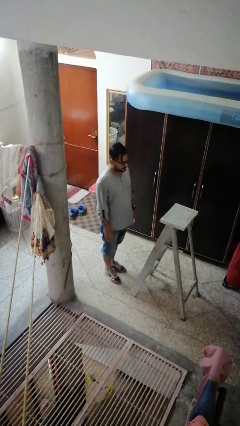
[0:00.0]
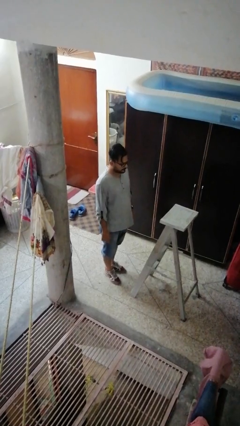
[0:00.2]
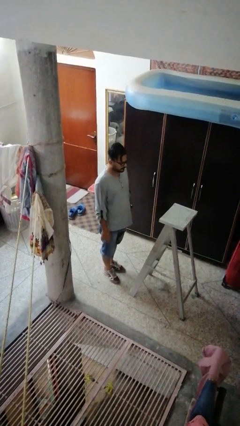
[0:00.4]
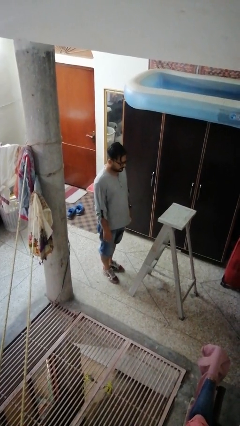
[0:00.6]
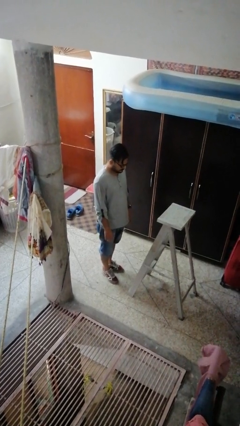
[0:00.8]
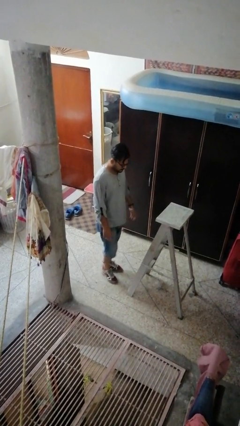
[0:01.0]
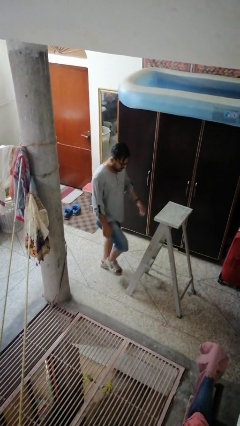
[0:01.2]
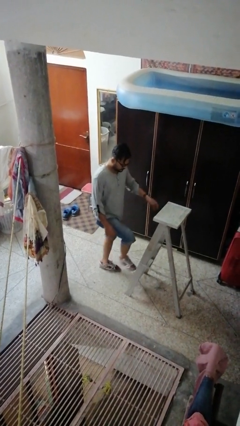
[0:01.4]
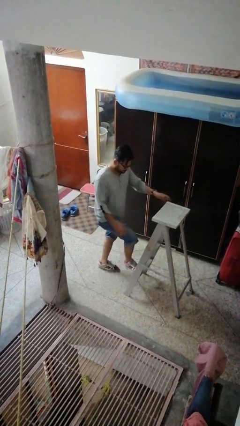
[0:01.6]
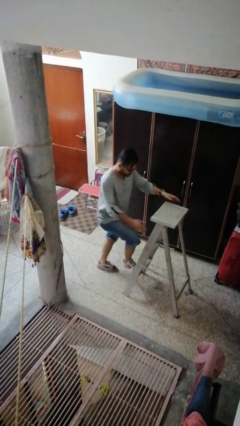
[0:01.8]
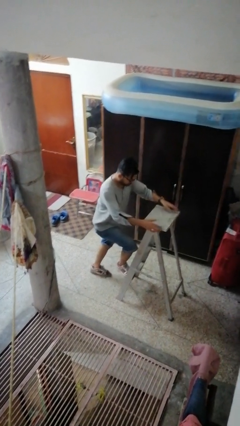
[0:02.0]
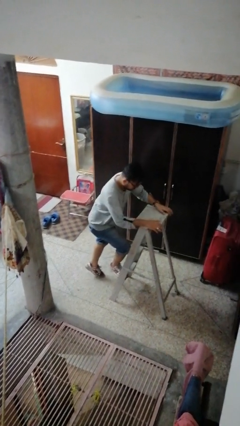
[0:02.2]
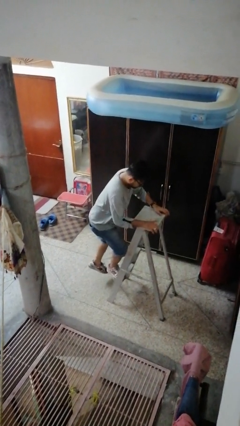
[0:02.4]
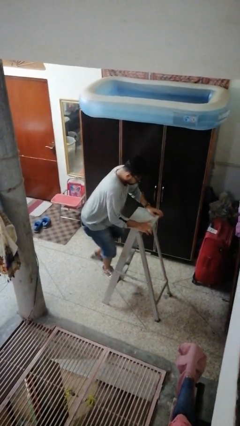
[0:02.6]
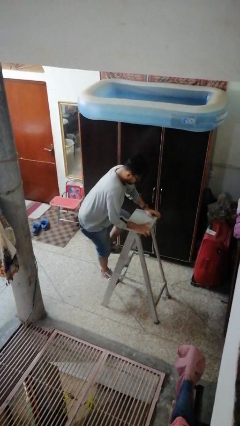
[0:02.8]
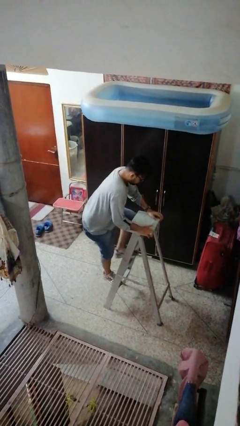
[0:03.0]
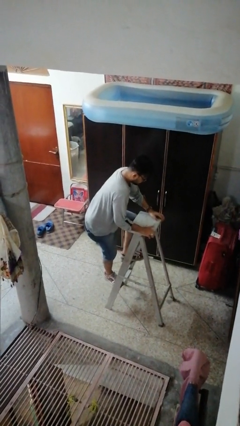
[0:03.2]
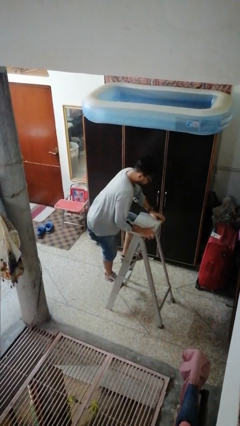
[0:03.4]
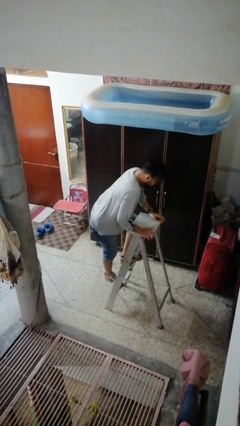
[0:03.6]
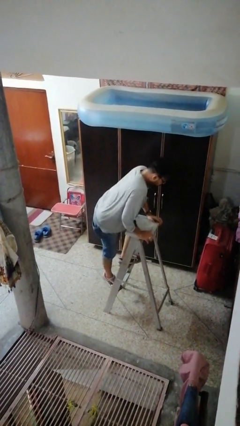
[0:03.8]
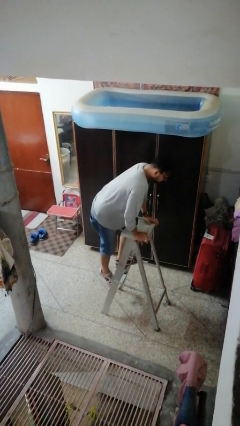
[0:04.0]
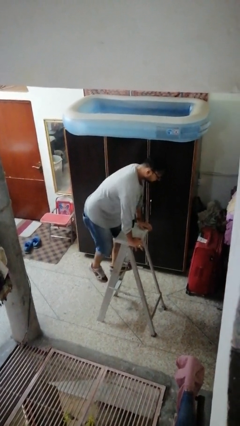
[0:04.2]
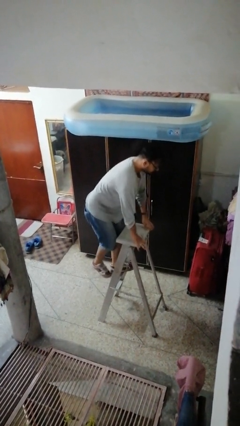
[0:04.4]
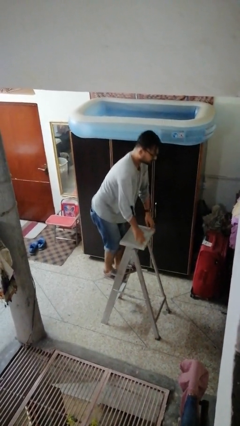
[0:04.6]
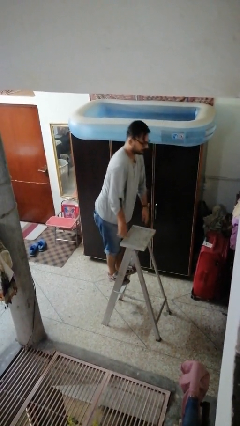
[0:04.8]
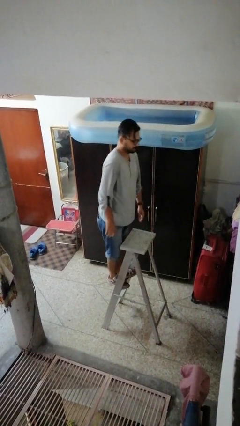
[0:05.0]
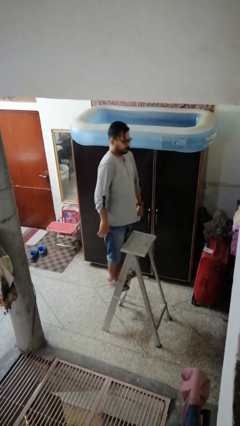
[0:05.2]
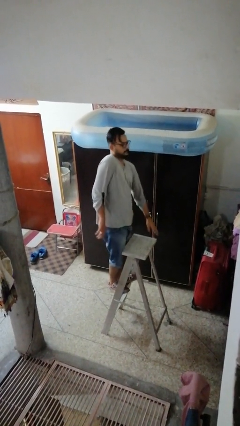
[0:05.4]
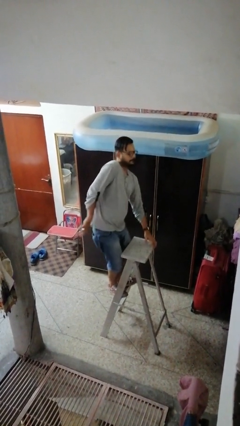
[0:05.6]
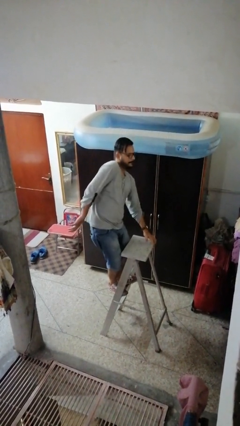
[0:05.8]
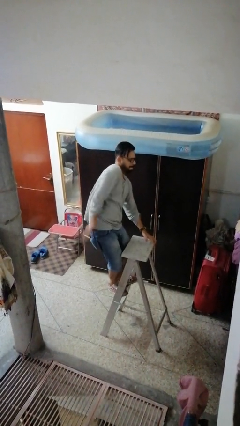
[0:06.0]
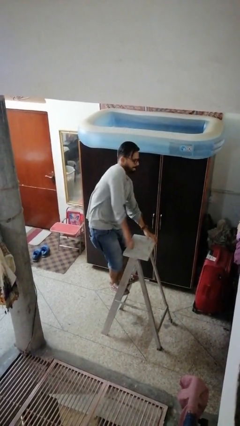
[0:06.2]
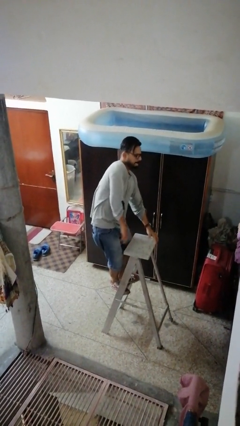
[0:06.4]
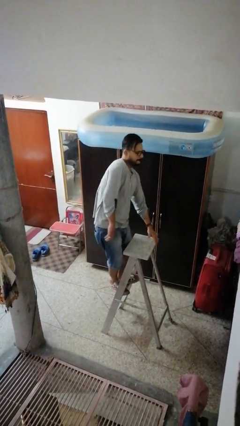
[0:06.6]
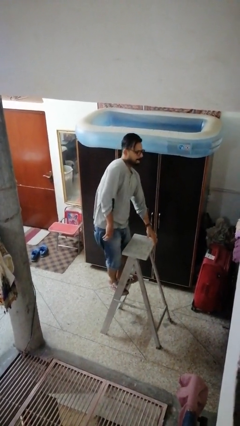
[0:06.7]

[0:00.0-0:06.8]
person climbs up ladder

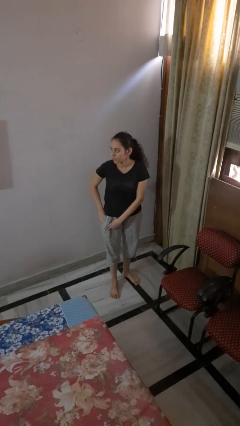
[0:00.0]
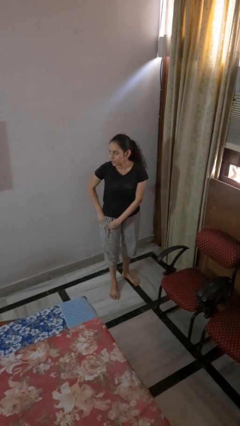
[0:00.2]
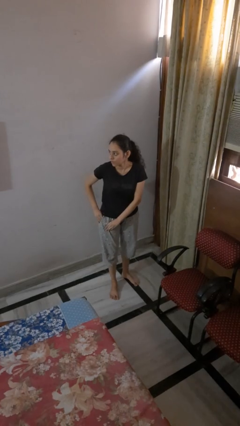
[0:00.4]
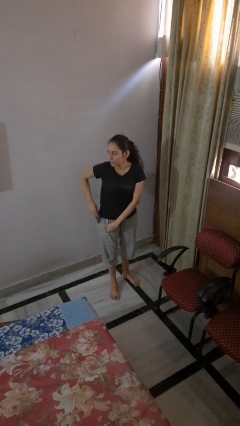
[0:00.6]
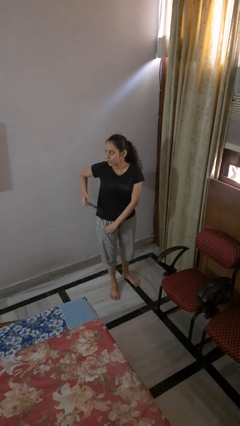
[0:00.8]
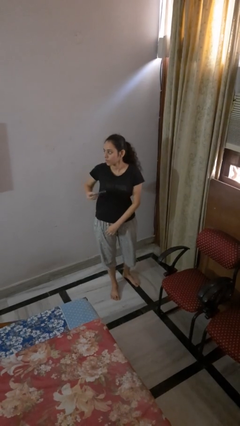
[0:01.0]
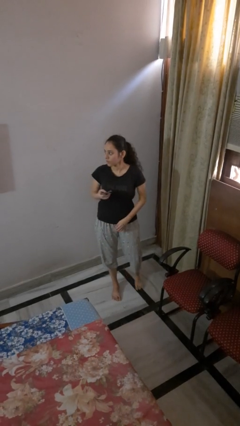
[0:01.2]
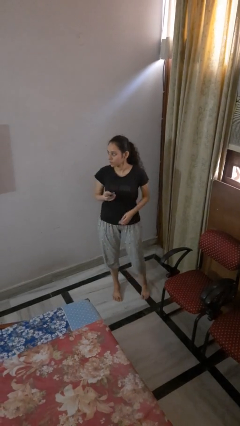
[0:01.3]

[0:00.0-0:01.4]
person takes phone from pocket

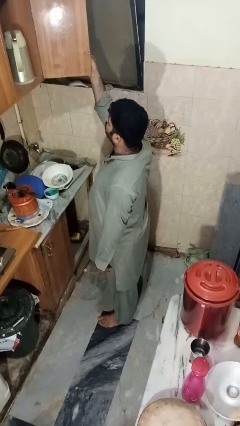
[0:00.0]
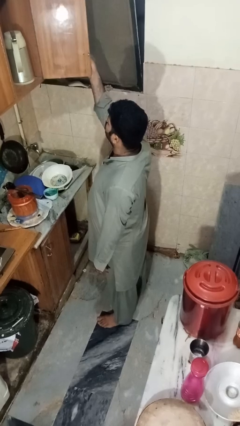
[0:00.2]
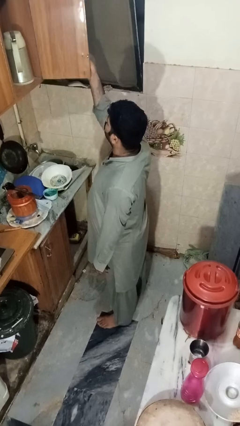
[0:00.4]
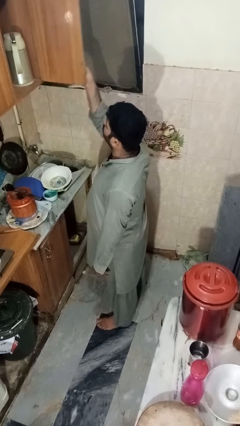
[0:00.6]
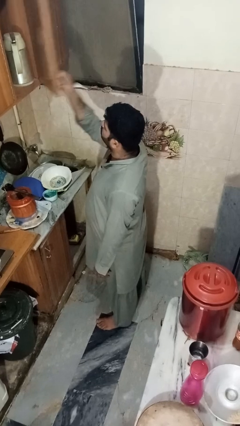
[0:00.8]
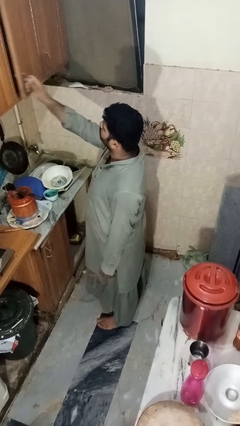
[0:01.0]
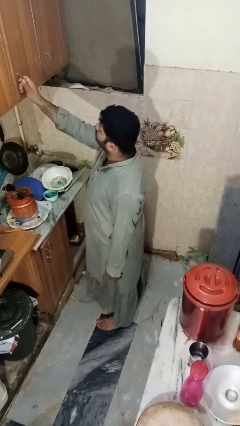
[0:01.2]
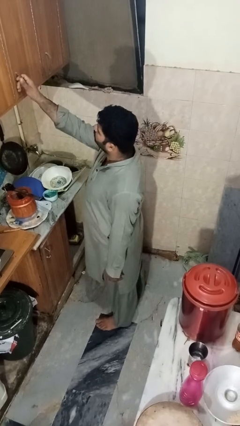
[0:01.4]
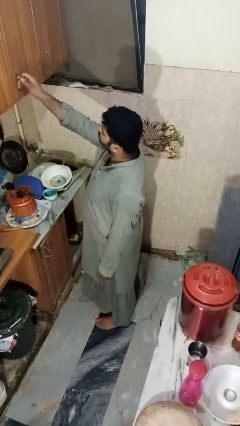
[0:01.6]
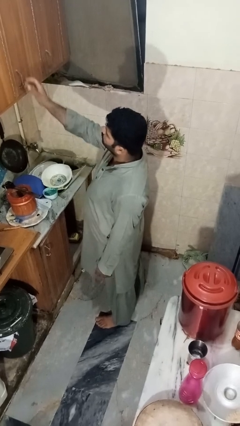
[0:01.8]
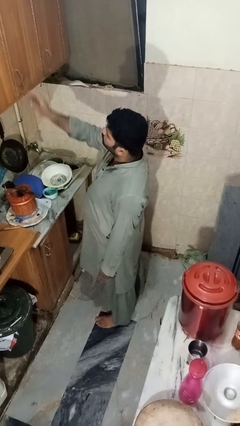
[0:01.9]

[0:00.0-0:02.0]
person closes cabinet

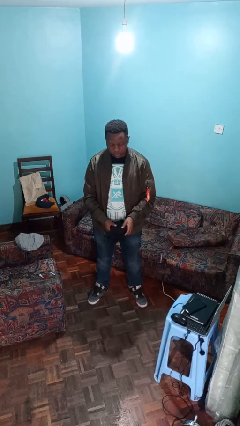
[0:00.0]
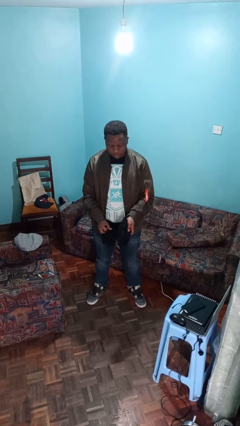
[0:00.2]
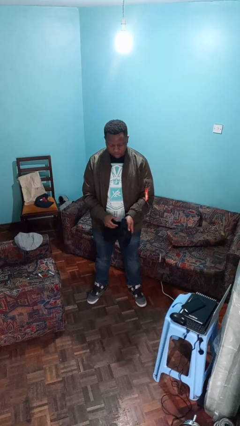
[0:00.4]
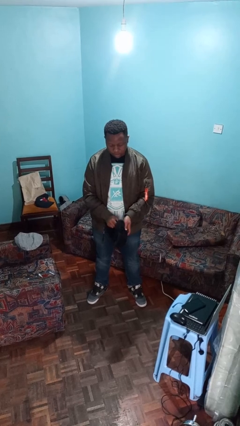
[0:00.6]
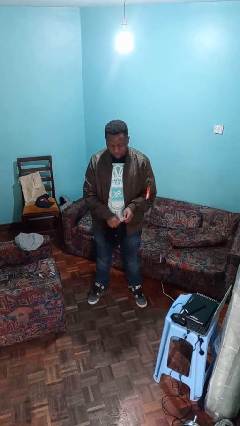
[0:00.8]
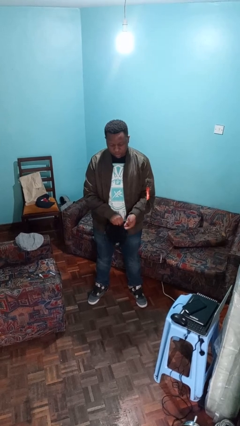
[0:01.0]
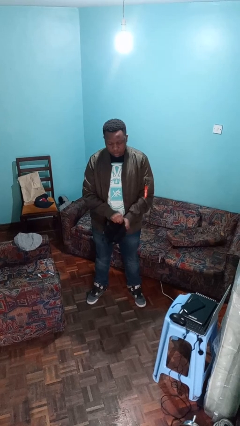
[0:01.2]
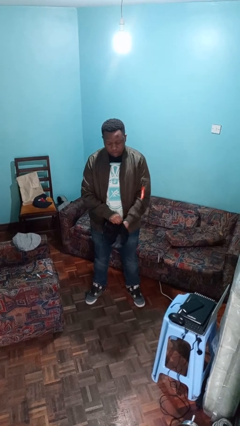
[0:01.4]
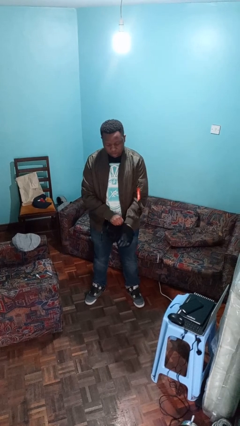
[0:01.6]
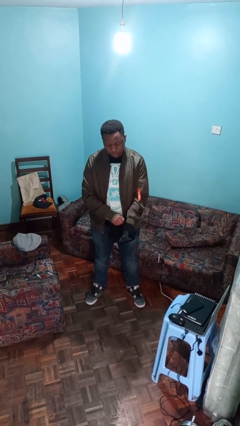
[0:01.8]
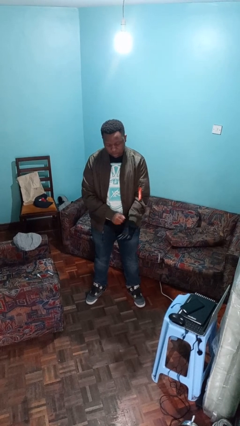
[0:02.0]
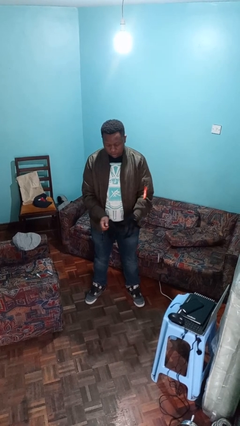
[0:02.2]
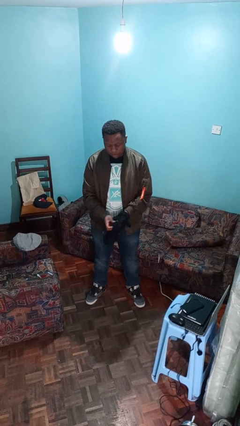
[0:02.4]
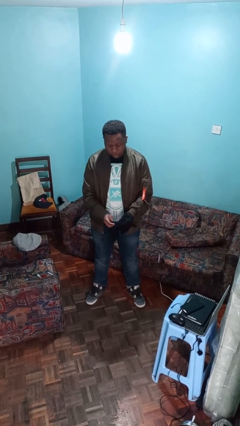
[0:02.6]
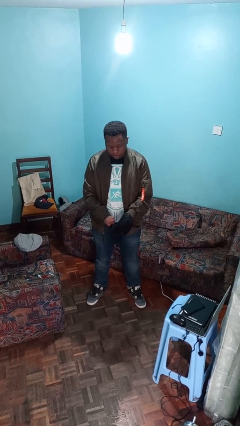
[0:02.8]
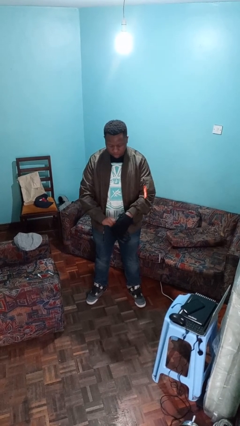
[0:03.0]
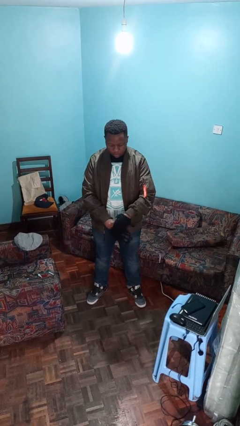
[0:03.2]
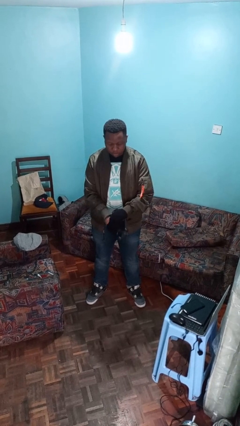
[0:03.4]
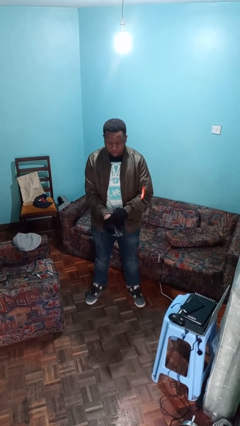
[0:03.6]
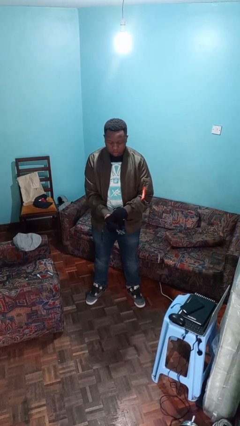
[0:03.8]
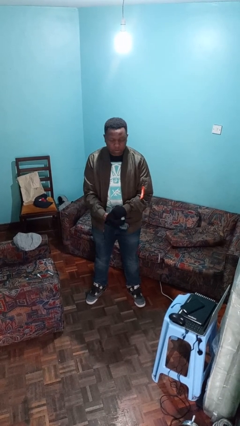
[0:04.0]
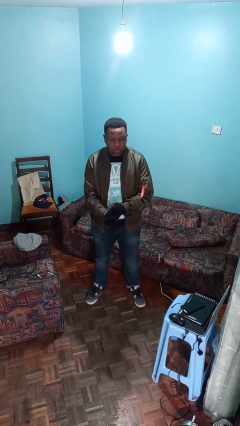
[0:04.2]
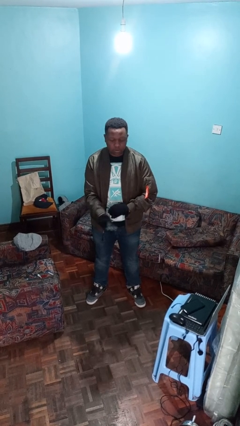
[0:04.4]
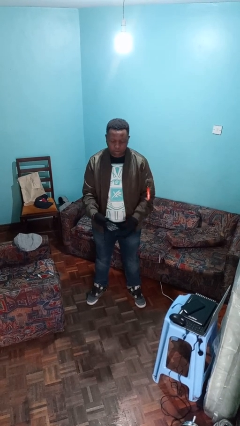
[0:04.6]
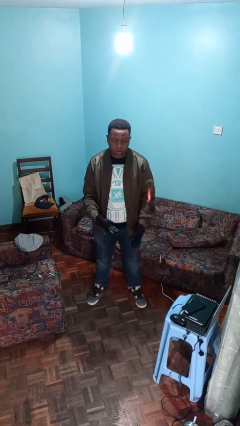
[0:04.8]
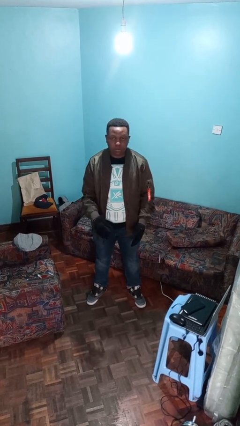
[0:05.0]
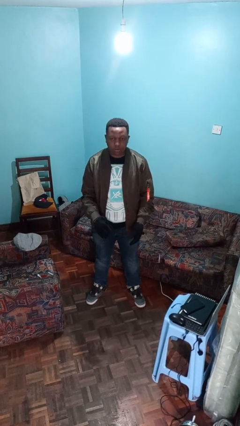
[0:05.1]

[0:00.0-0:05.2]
person puts on gloves

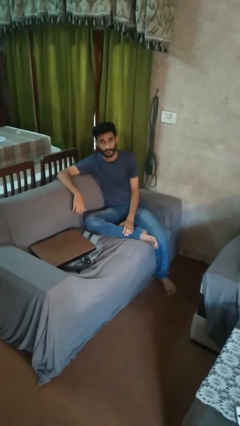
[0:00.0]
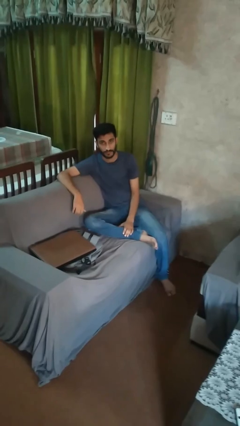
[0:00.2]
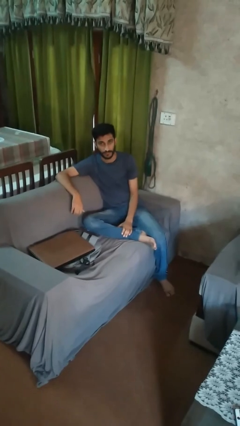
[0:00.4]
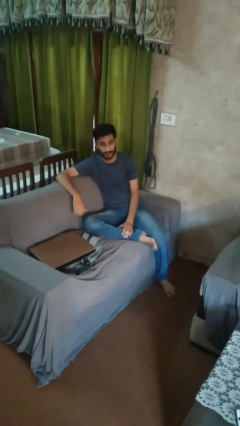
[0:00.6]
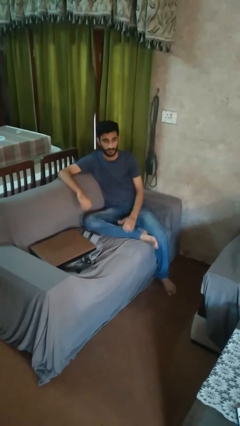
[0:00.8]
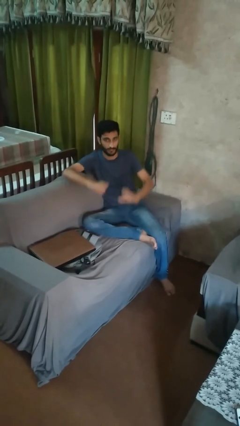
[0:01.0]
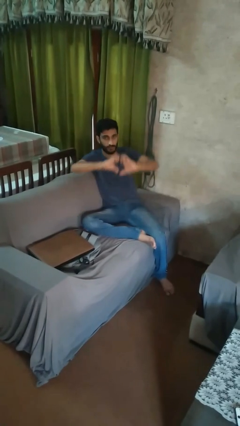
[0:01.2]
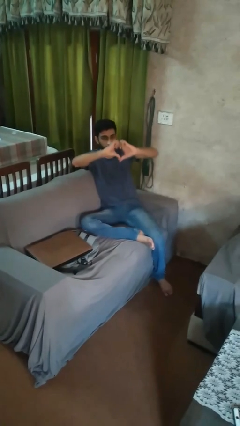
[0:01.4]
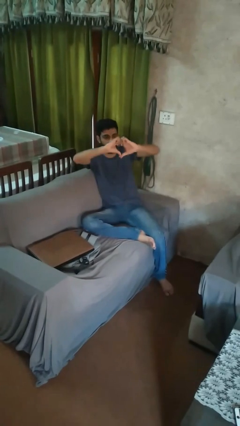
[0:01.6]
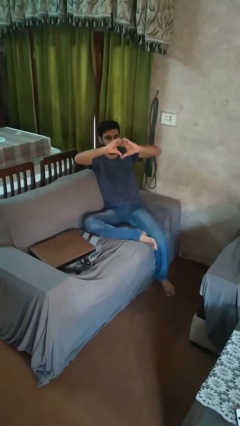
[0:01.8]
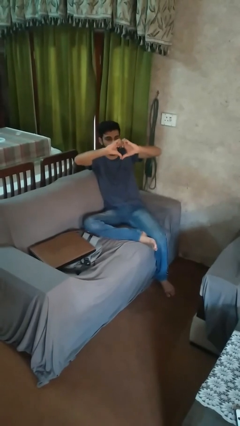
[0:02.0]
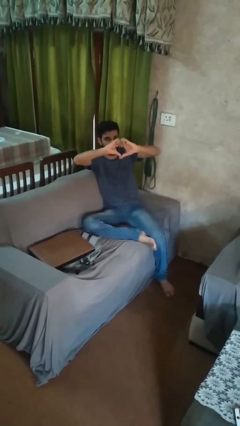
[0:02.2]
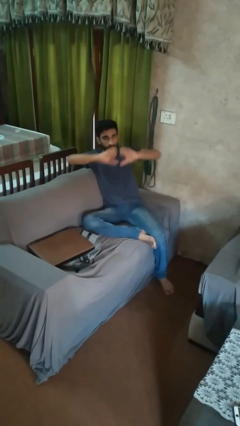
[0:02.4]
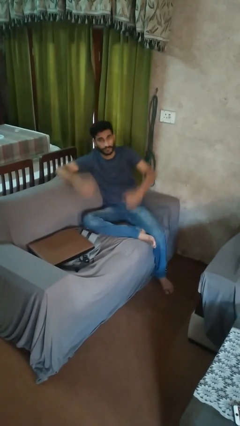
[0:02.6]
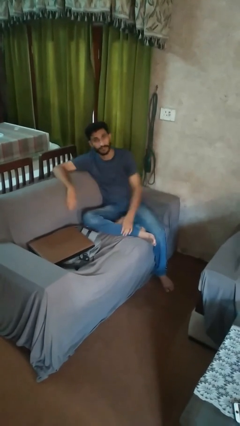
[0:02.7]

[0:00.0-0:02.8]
person gestures heart
